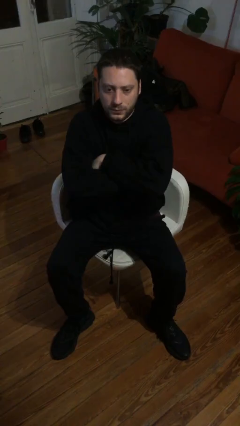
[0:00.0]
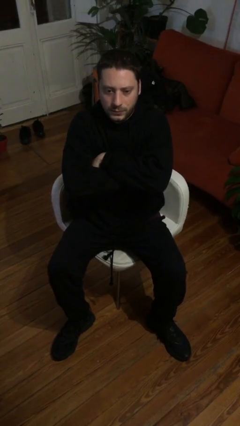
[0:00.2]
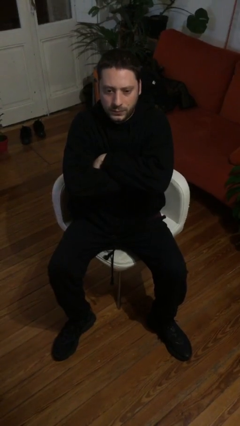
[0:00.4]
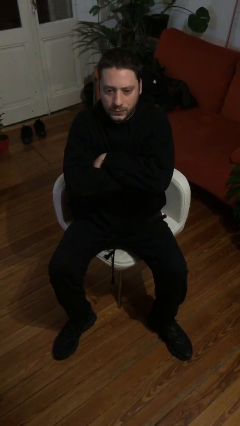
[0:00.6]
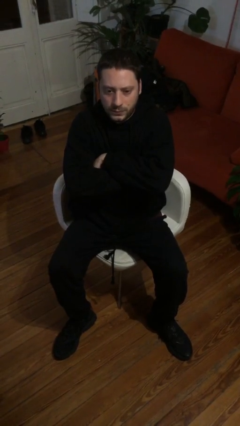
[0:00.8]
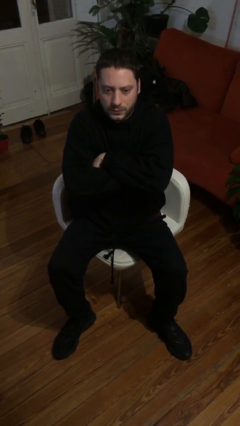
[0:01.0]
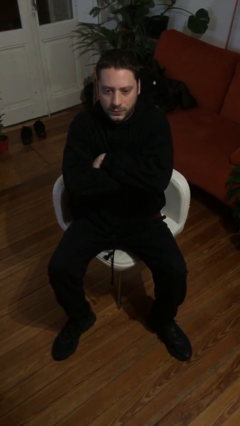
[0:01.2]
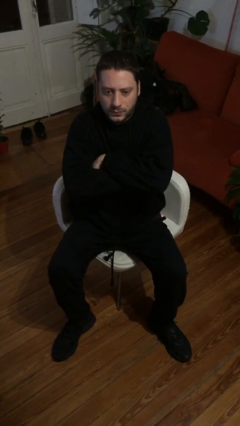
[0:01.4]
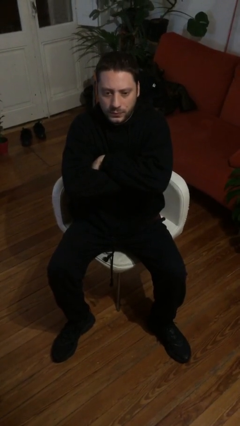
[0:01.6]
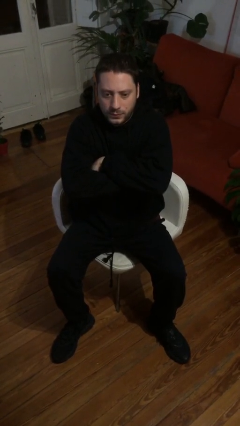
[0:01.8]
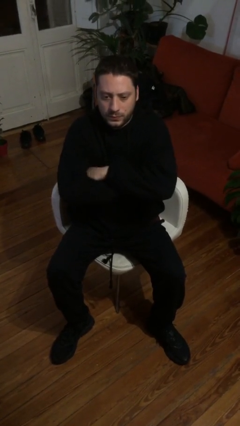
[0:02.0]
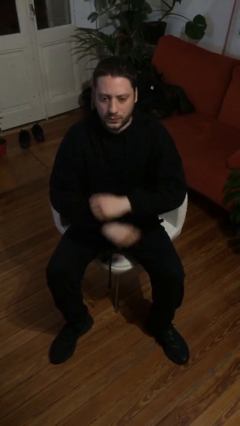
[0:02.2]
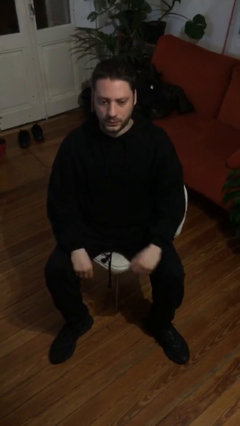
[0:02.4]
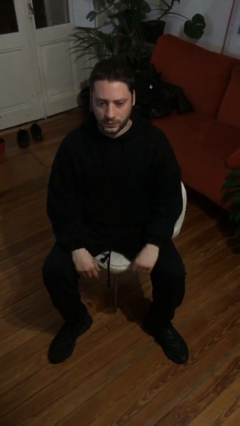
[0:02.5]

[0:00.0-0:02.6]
person crosses arms

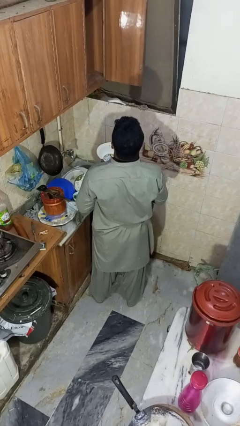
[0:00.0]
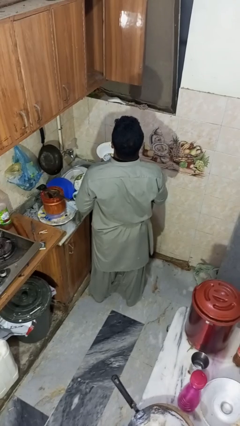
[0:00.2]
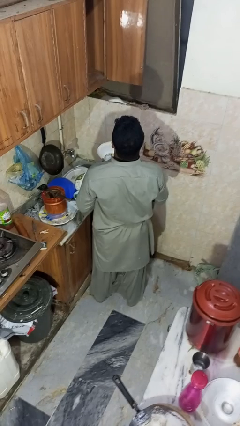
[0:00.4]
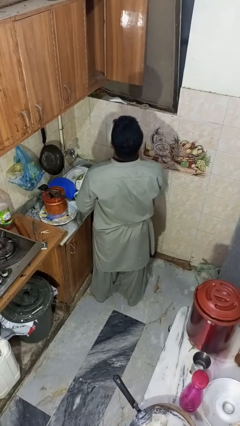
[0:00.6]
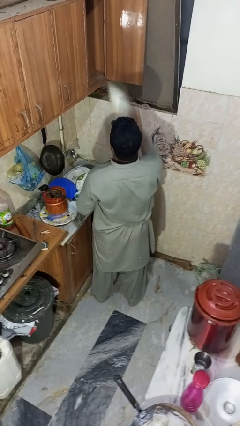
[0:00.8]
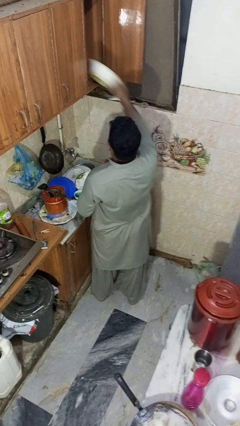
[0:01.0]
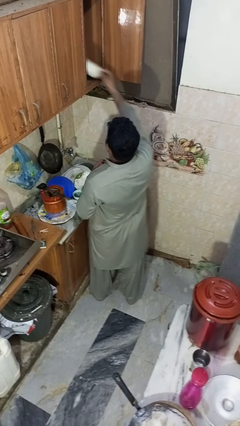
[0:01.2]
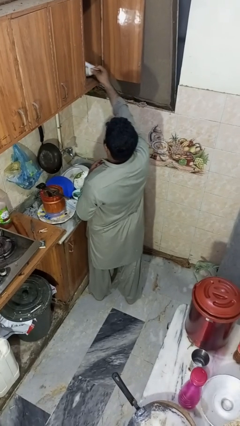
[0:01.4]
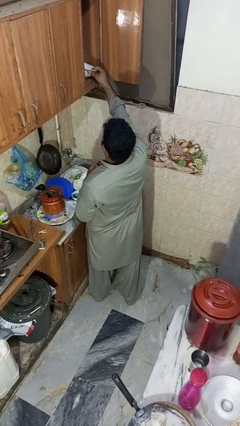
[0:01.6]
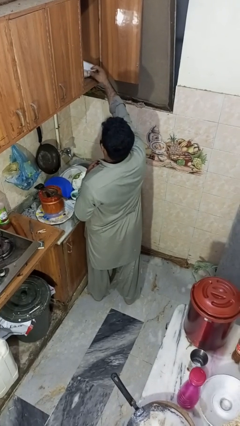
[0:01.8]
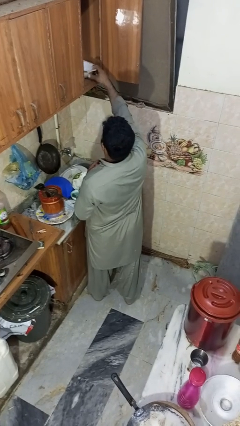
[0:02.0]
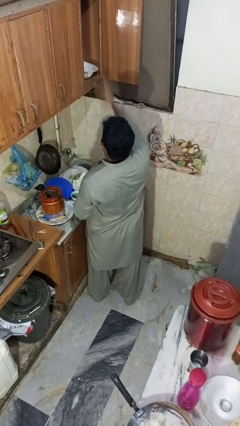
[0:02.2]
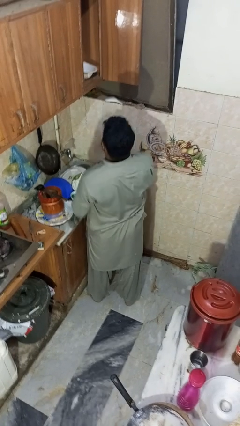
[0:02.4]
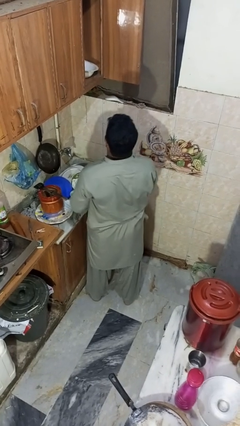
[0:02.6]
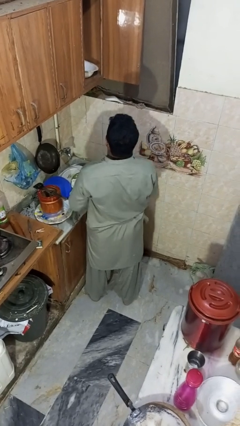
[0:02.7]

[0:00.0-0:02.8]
person puts object in cabinet

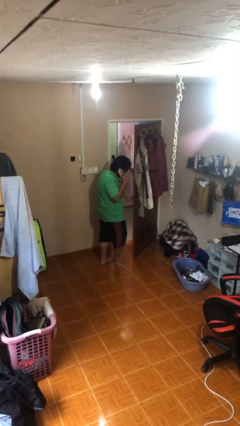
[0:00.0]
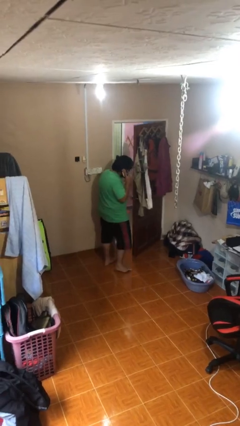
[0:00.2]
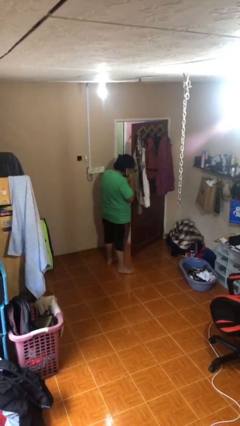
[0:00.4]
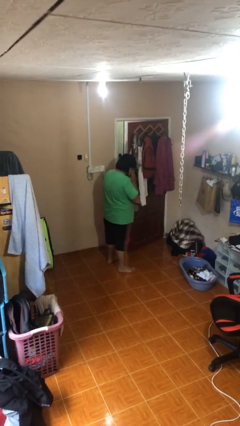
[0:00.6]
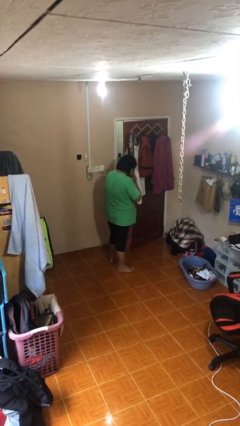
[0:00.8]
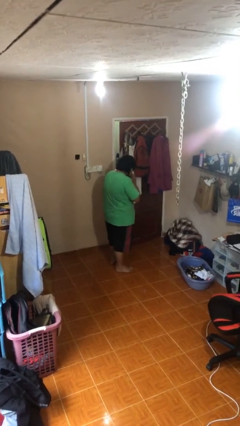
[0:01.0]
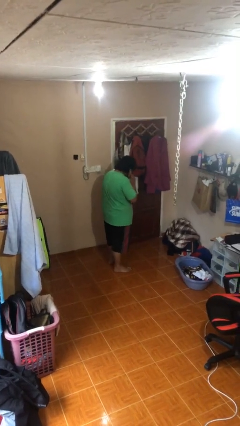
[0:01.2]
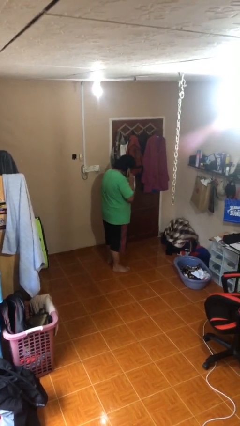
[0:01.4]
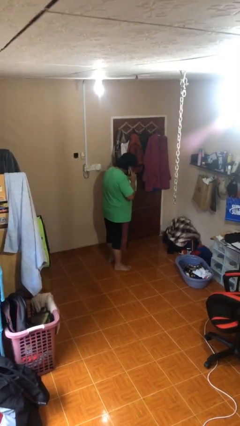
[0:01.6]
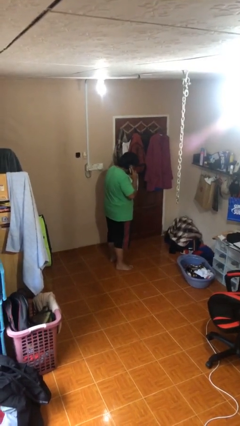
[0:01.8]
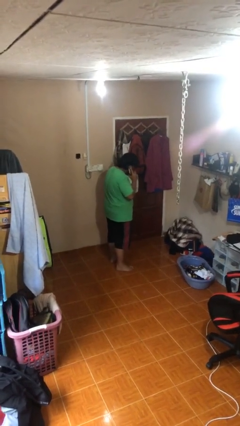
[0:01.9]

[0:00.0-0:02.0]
person closes facility door

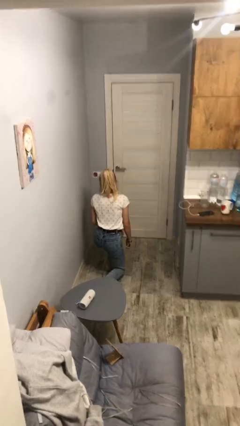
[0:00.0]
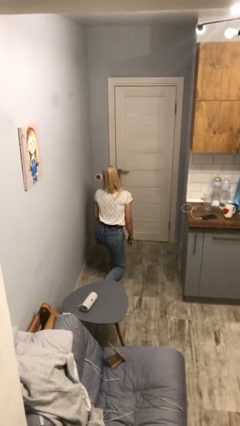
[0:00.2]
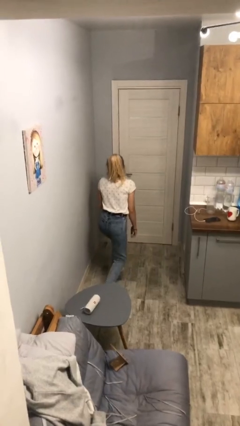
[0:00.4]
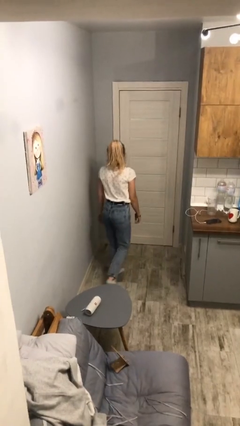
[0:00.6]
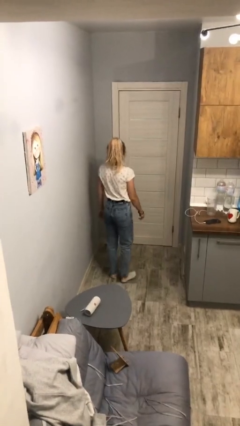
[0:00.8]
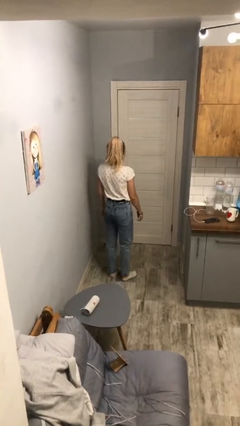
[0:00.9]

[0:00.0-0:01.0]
person stands up from floor

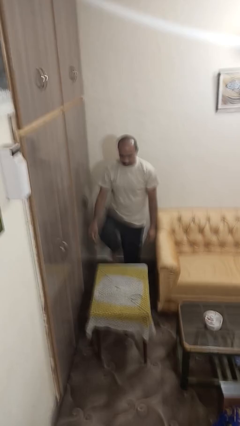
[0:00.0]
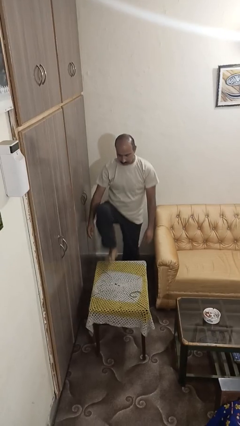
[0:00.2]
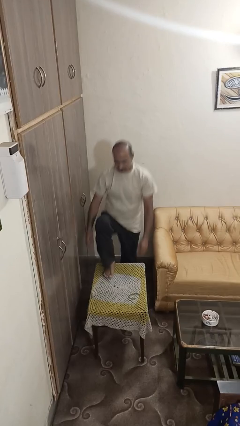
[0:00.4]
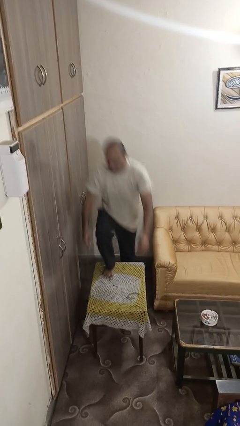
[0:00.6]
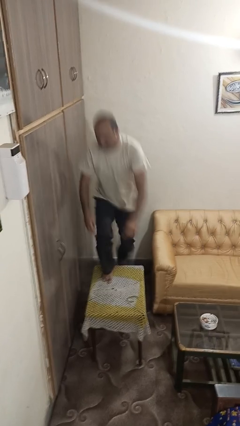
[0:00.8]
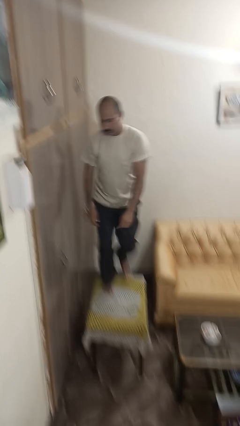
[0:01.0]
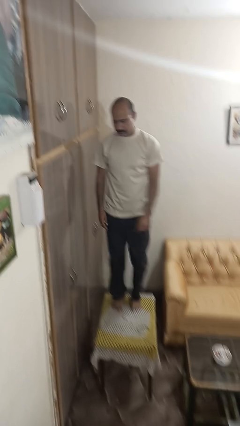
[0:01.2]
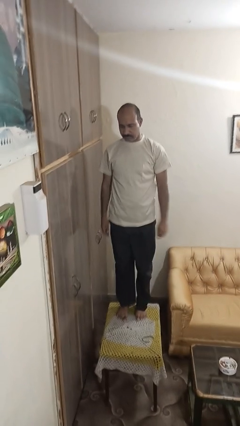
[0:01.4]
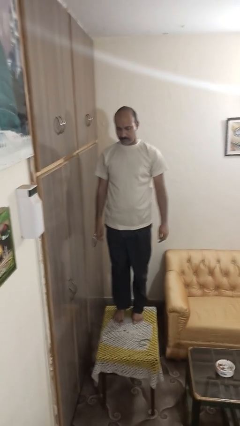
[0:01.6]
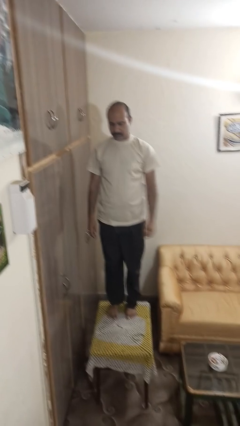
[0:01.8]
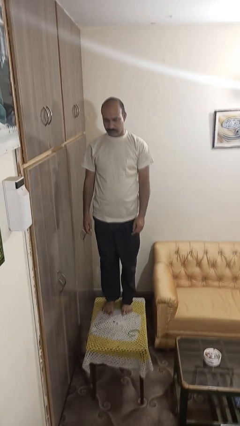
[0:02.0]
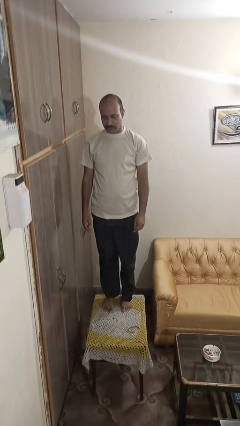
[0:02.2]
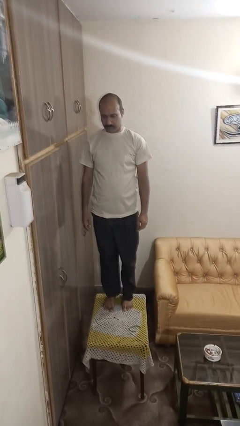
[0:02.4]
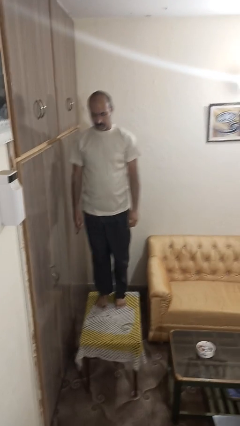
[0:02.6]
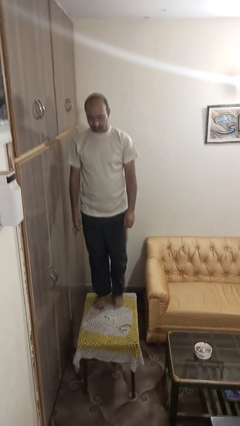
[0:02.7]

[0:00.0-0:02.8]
person climbs on table

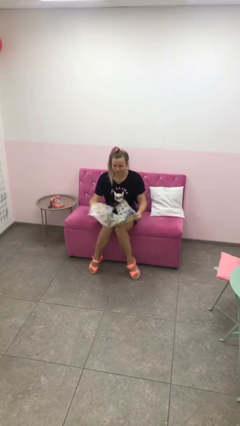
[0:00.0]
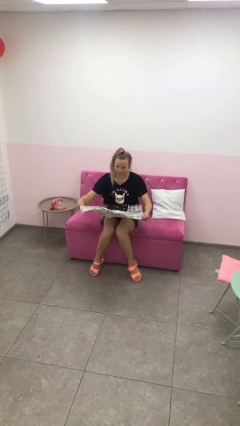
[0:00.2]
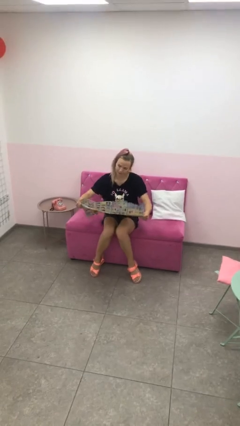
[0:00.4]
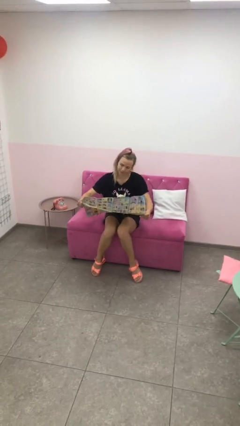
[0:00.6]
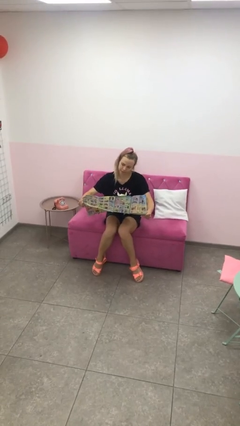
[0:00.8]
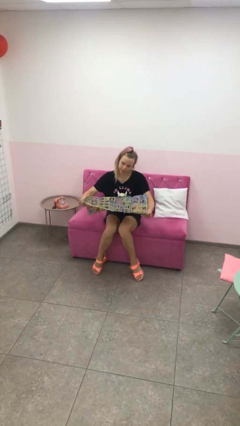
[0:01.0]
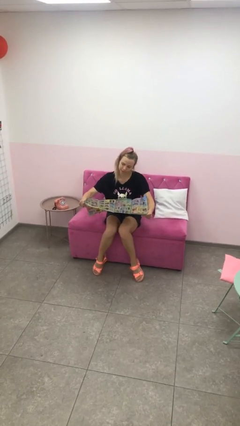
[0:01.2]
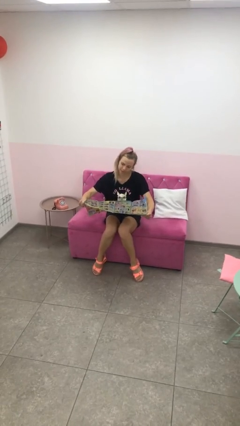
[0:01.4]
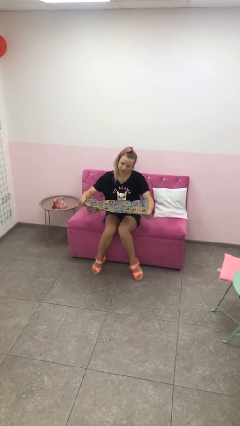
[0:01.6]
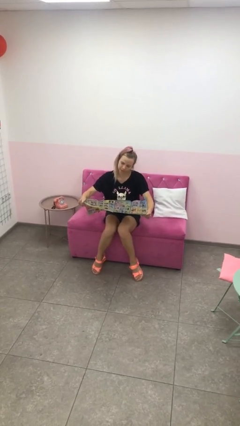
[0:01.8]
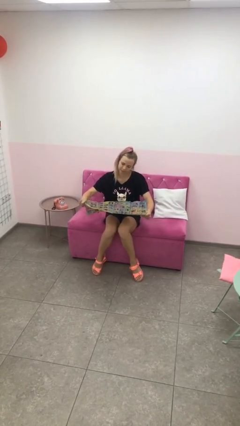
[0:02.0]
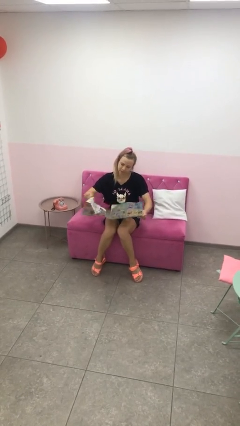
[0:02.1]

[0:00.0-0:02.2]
person reads newspaper

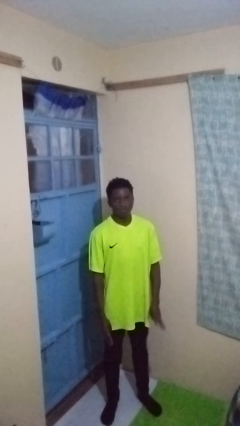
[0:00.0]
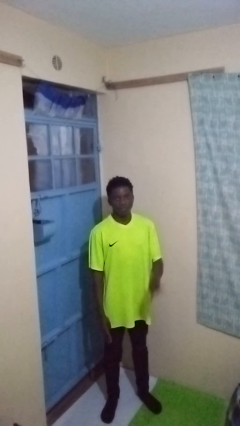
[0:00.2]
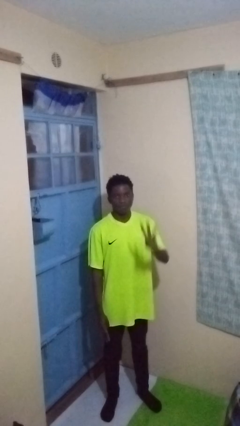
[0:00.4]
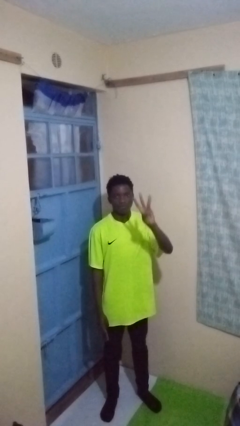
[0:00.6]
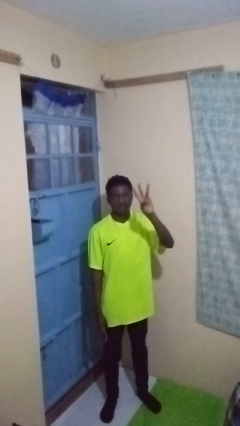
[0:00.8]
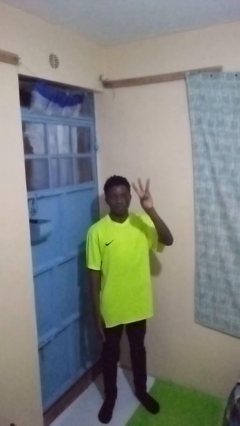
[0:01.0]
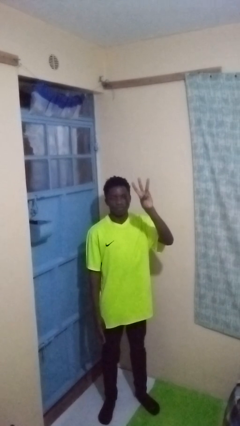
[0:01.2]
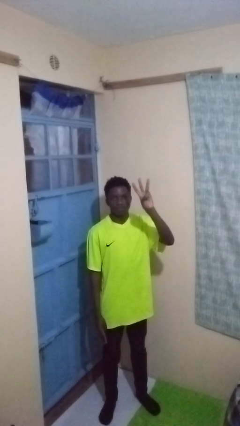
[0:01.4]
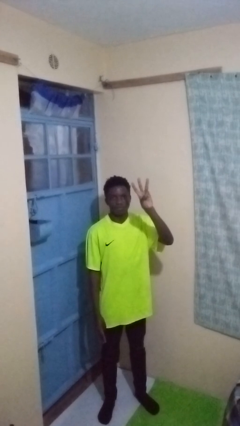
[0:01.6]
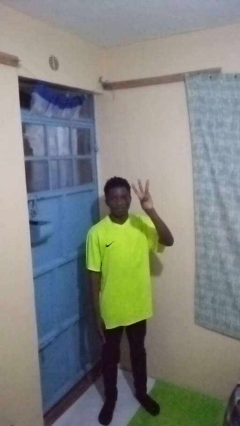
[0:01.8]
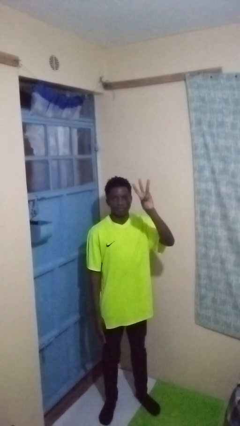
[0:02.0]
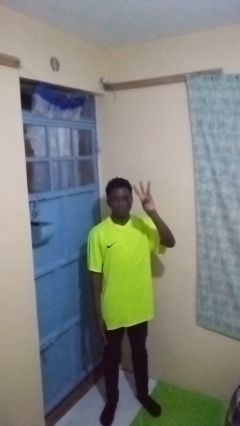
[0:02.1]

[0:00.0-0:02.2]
person gestures number three

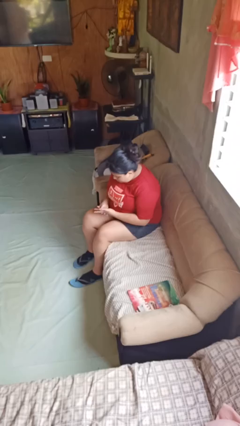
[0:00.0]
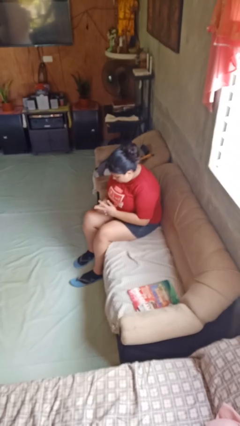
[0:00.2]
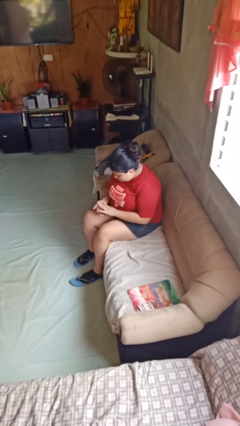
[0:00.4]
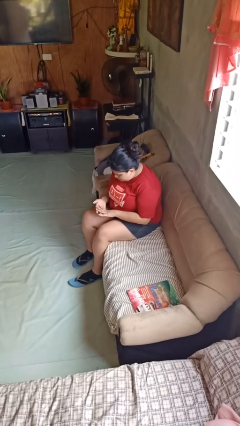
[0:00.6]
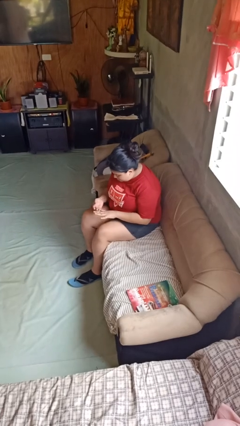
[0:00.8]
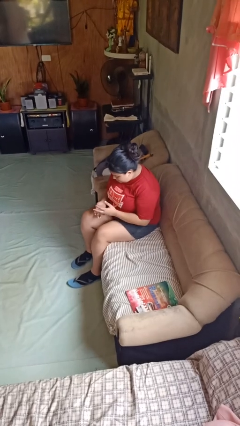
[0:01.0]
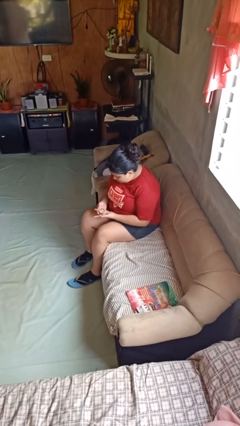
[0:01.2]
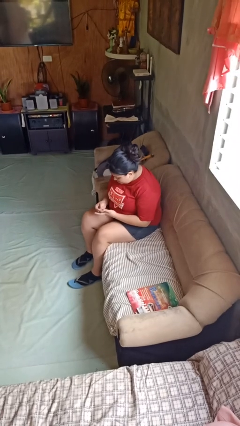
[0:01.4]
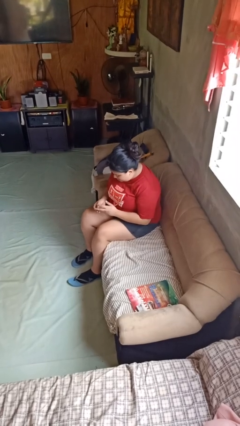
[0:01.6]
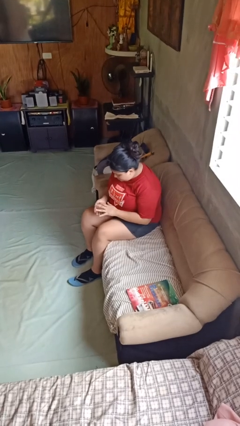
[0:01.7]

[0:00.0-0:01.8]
person looks at hands in lap
